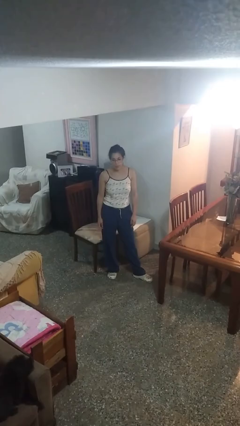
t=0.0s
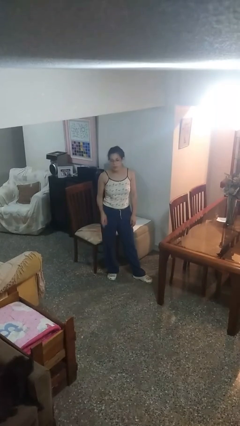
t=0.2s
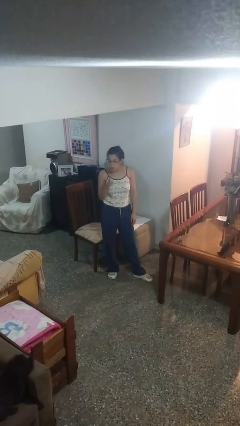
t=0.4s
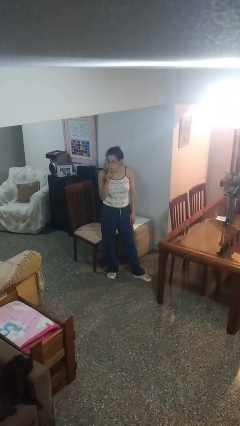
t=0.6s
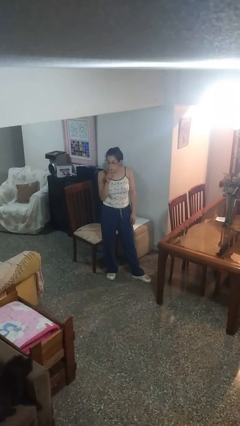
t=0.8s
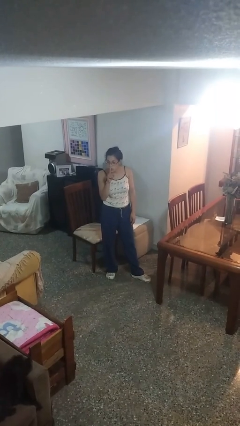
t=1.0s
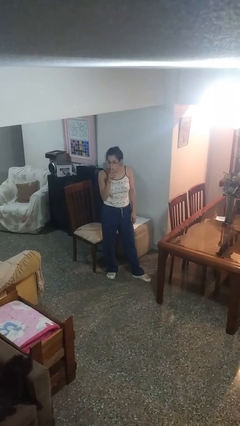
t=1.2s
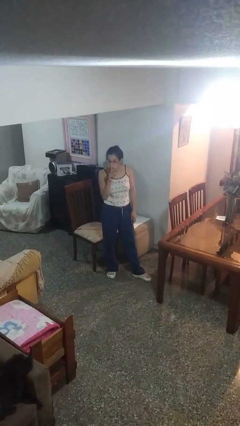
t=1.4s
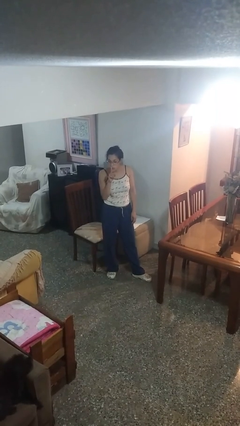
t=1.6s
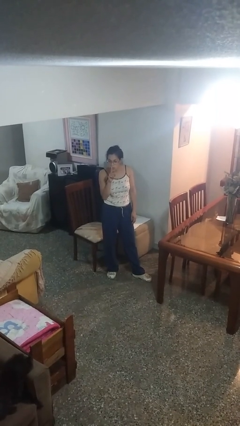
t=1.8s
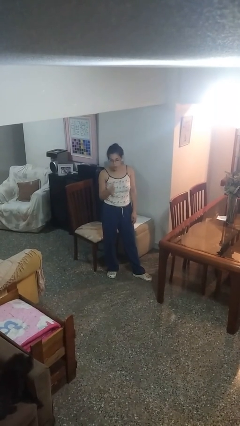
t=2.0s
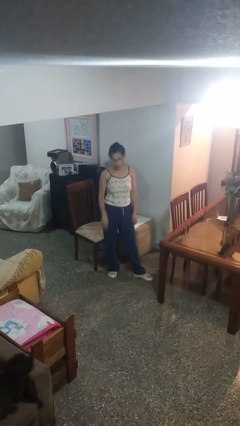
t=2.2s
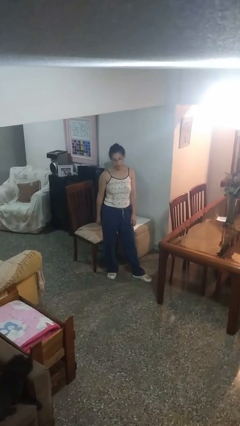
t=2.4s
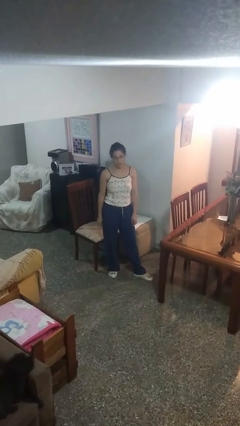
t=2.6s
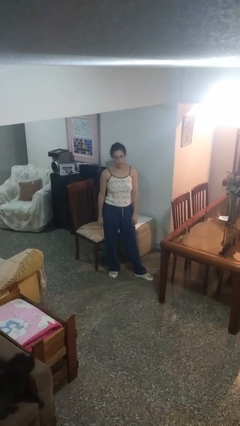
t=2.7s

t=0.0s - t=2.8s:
person gestures be quiet

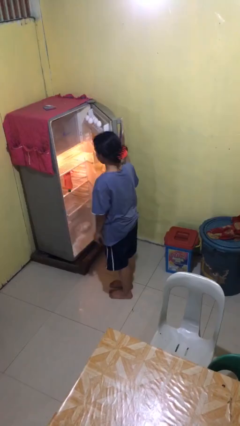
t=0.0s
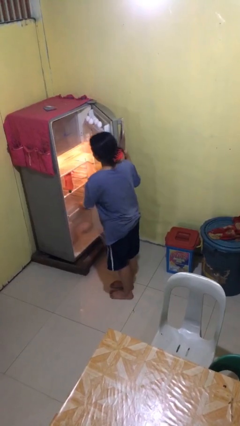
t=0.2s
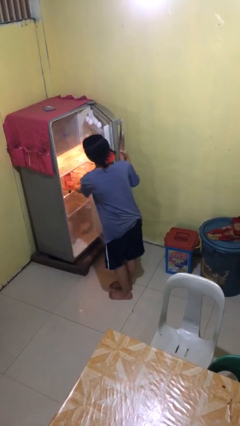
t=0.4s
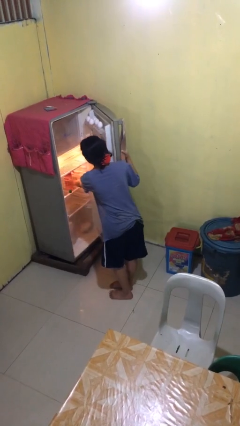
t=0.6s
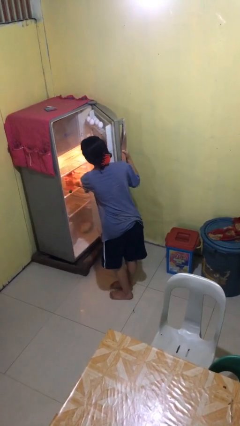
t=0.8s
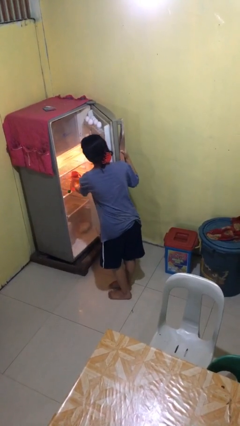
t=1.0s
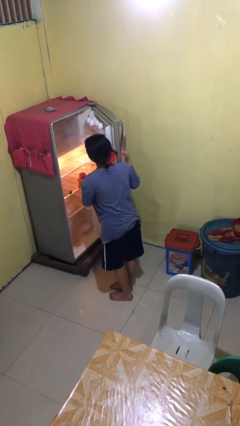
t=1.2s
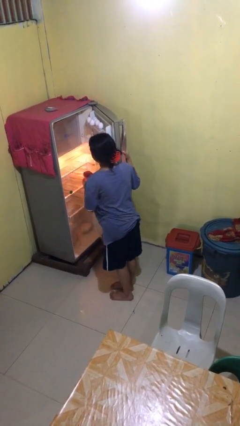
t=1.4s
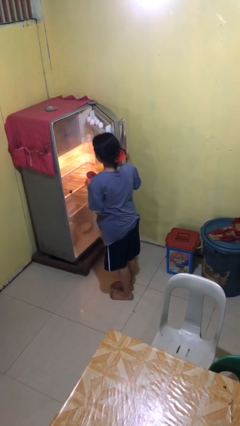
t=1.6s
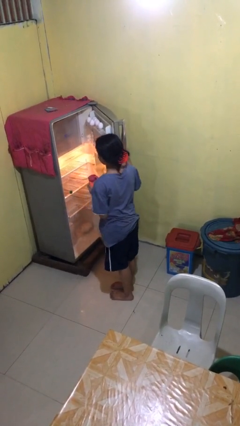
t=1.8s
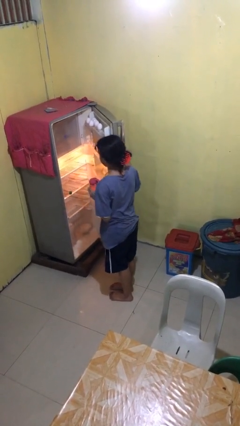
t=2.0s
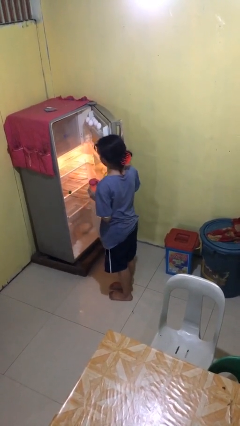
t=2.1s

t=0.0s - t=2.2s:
person takes object from refrigerator

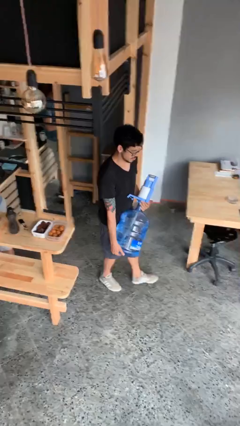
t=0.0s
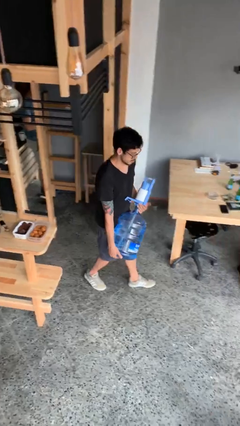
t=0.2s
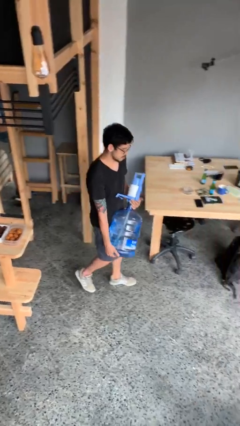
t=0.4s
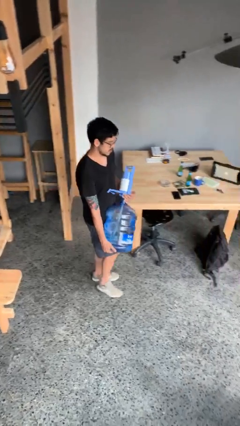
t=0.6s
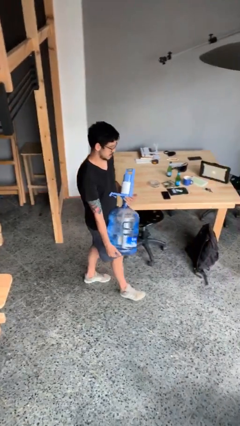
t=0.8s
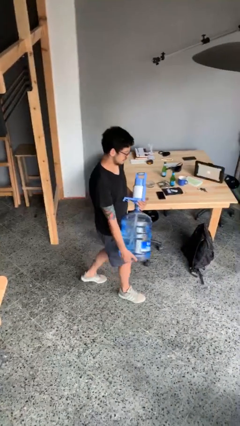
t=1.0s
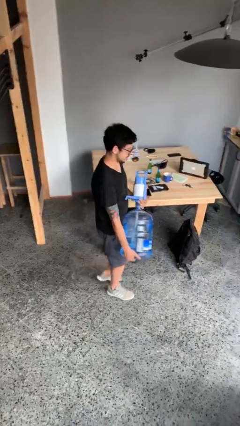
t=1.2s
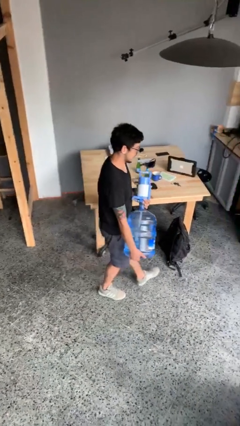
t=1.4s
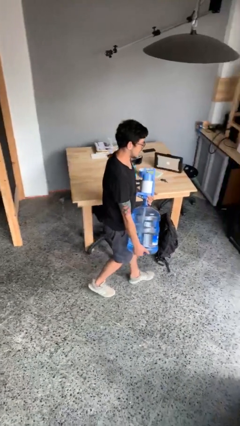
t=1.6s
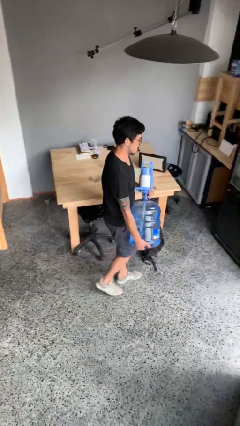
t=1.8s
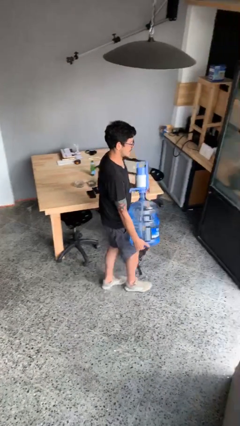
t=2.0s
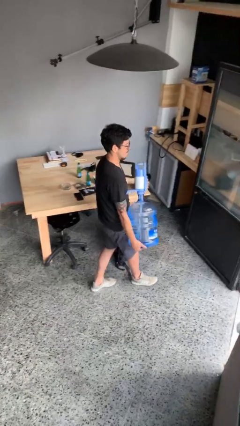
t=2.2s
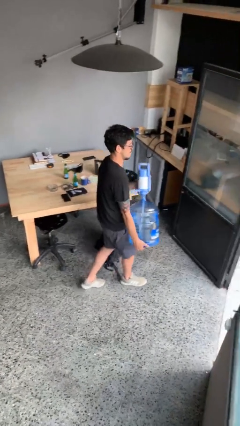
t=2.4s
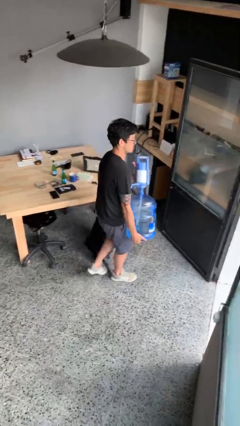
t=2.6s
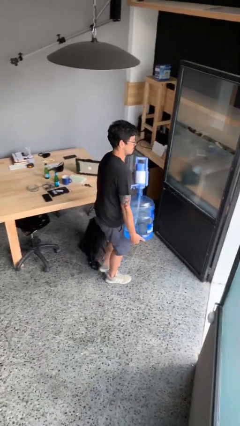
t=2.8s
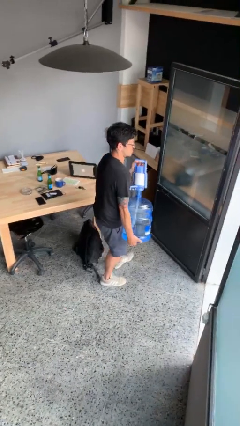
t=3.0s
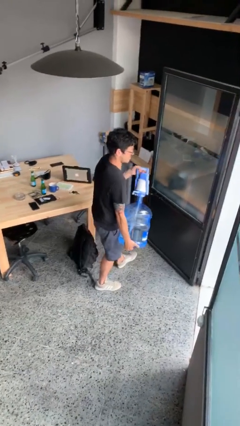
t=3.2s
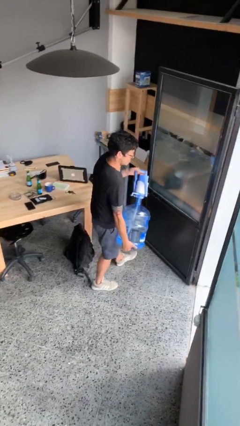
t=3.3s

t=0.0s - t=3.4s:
person carries heavy object

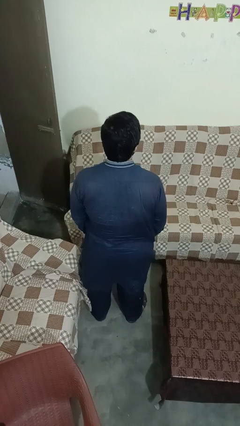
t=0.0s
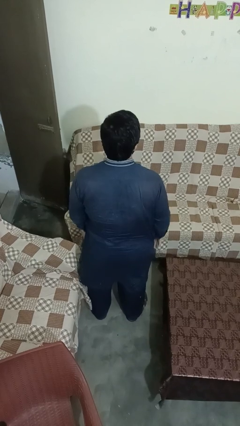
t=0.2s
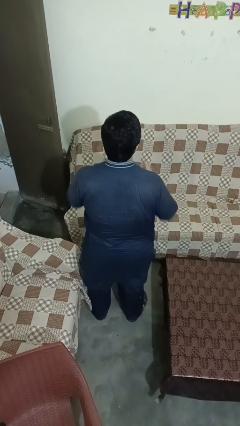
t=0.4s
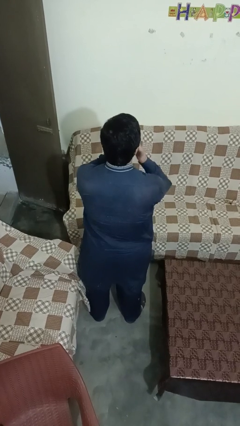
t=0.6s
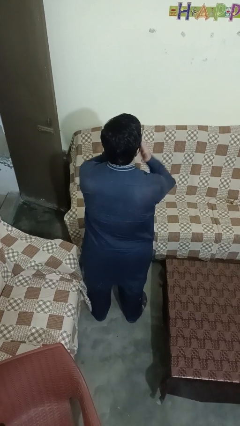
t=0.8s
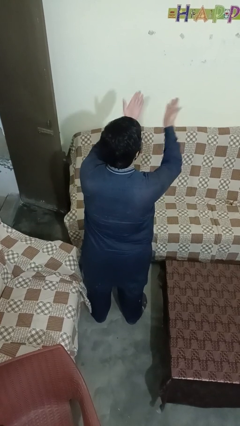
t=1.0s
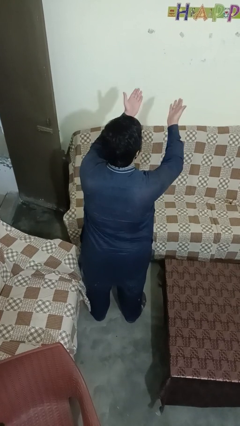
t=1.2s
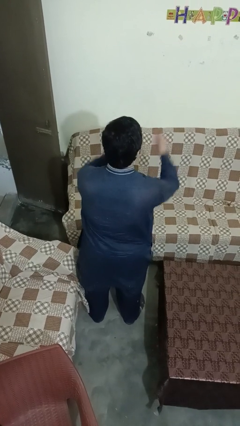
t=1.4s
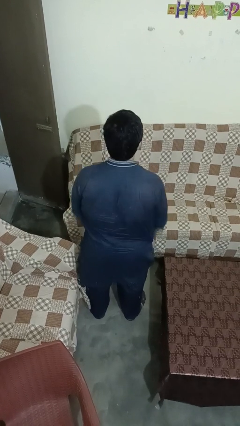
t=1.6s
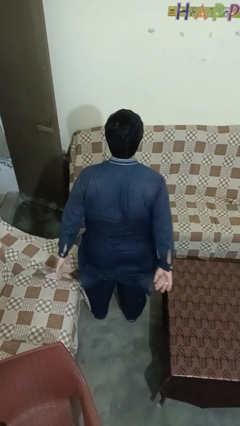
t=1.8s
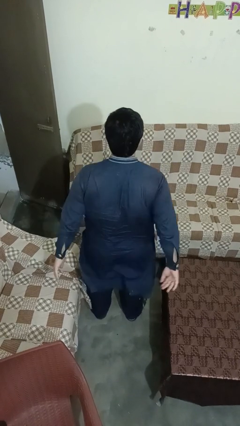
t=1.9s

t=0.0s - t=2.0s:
person gestures blow kiss

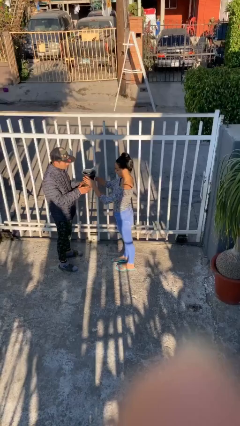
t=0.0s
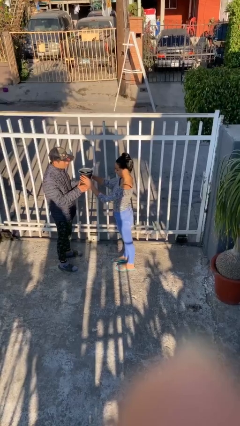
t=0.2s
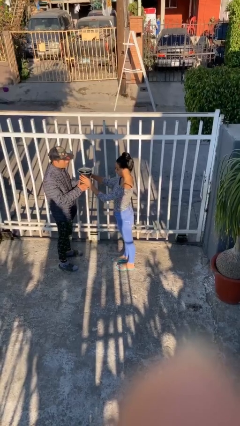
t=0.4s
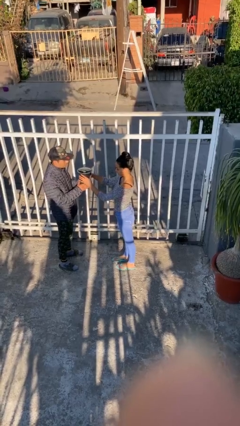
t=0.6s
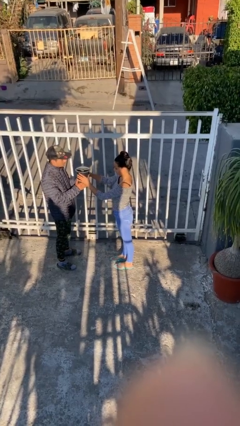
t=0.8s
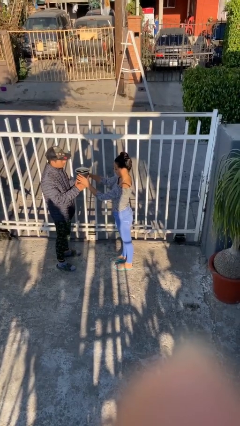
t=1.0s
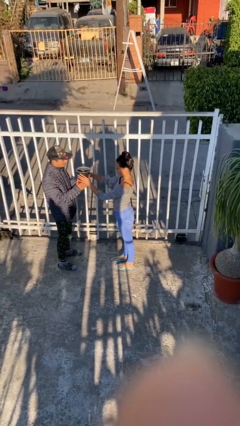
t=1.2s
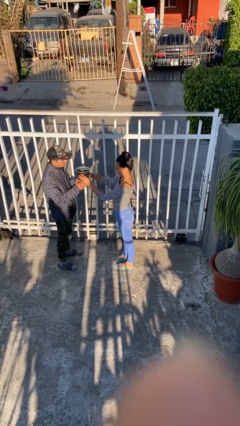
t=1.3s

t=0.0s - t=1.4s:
person transfers object to person

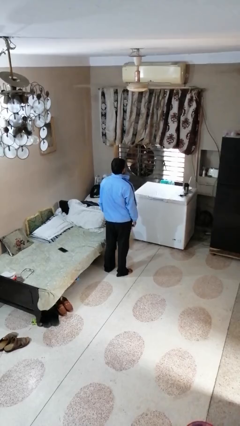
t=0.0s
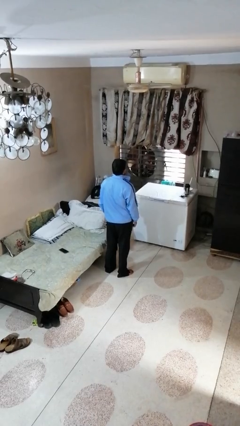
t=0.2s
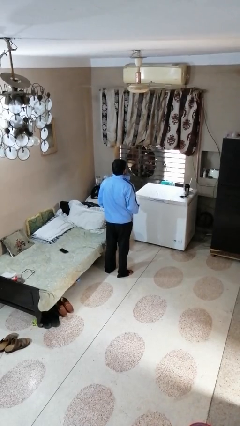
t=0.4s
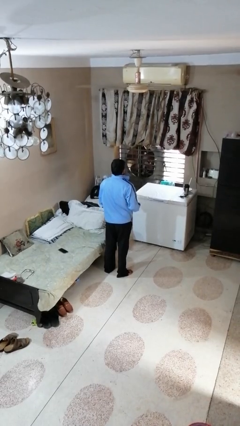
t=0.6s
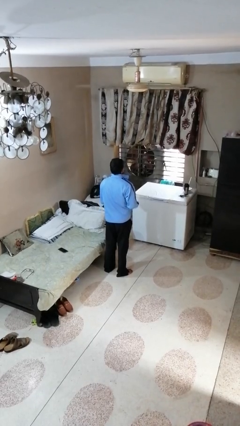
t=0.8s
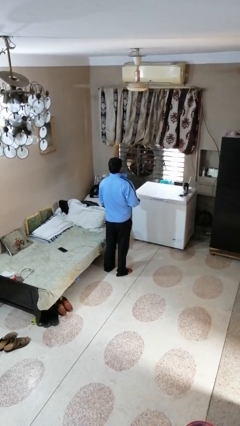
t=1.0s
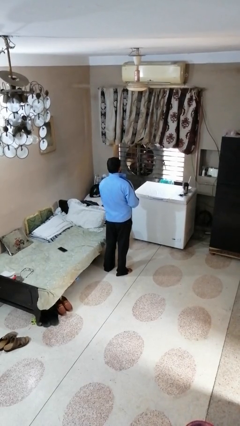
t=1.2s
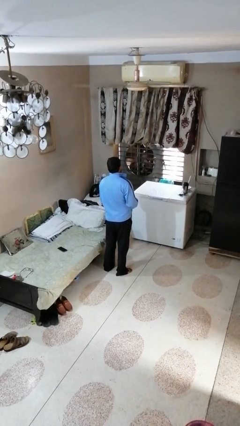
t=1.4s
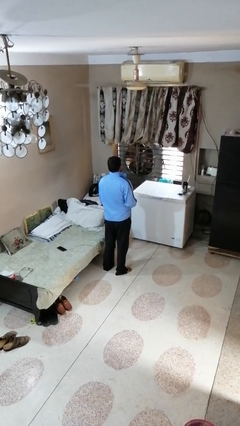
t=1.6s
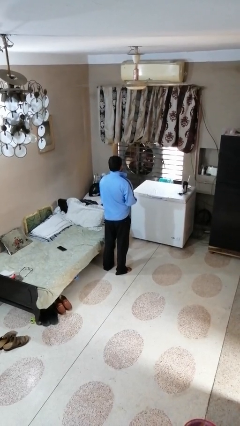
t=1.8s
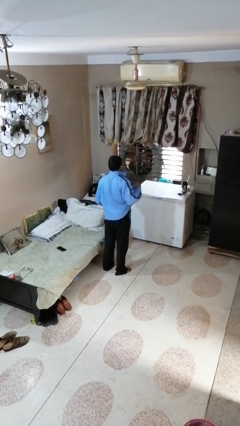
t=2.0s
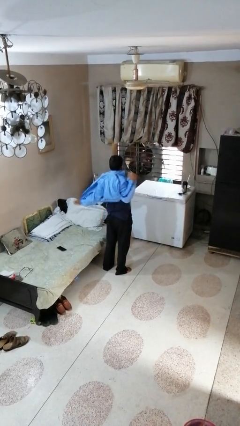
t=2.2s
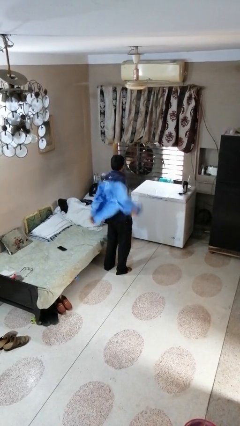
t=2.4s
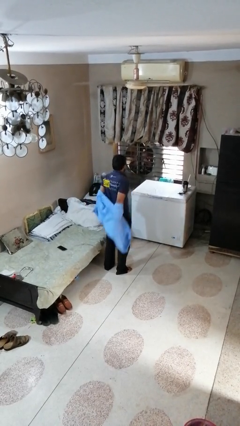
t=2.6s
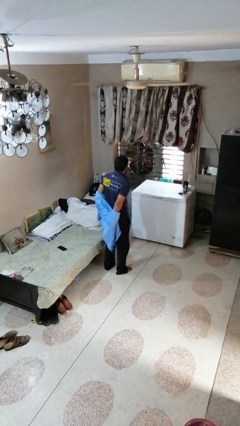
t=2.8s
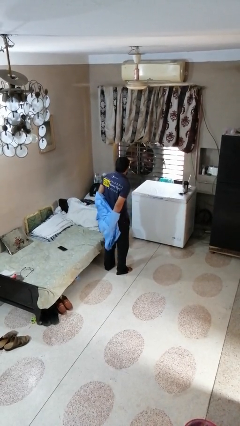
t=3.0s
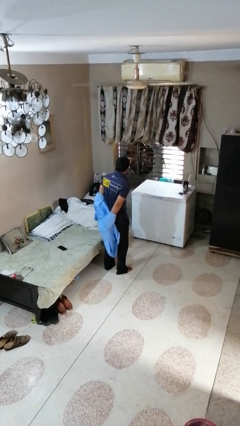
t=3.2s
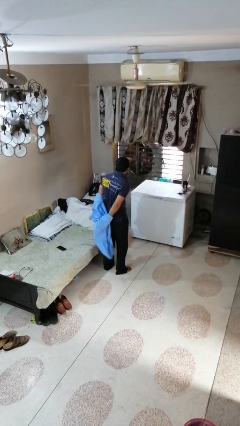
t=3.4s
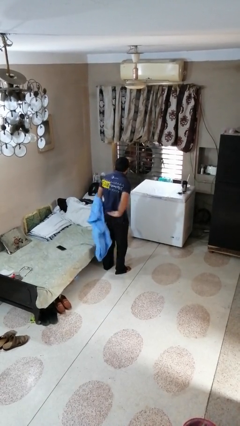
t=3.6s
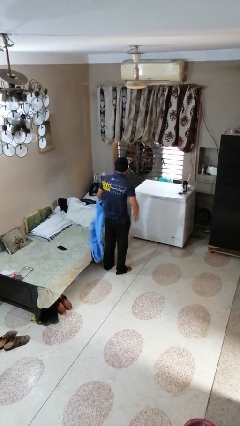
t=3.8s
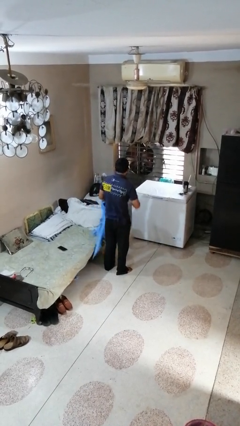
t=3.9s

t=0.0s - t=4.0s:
person takes off jacket

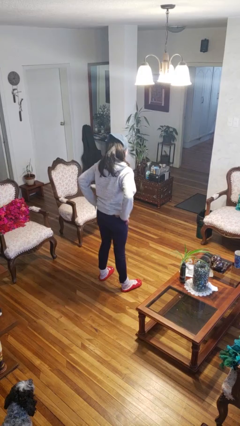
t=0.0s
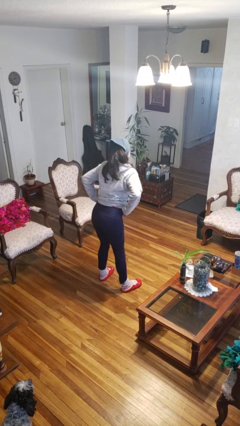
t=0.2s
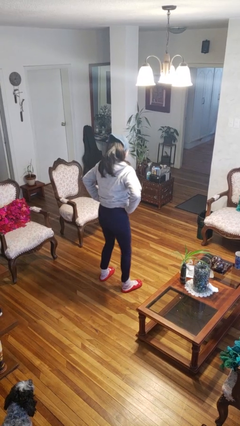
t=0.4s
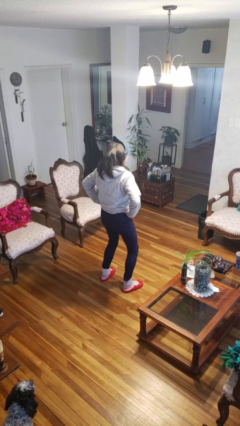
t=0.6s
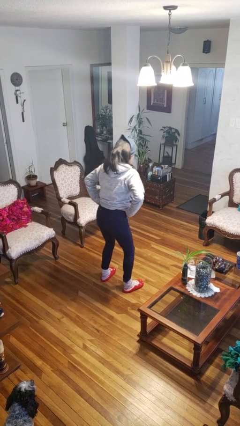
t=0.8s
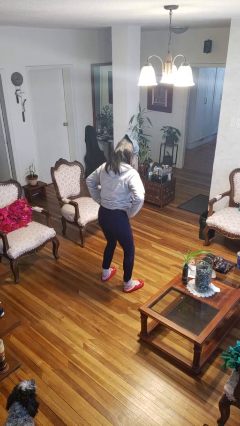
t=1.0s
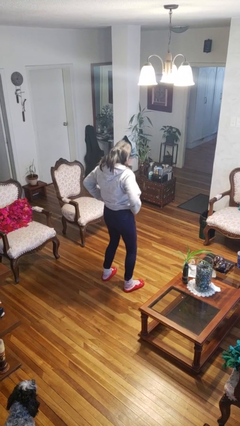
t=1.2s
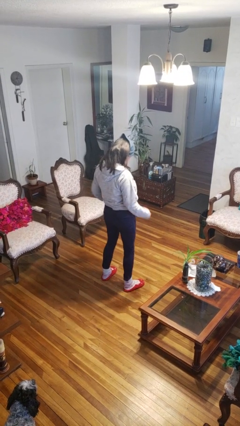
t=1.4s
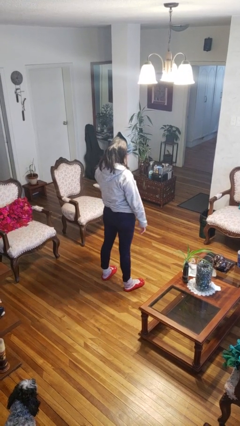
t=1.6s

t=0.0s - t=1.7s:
person wiggles hips
